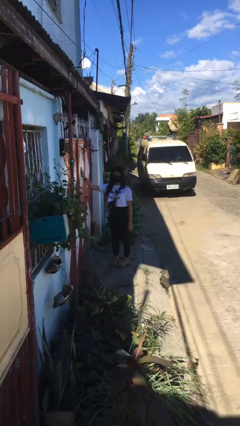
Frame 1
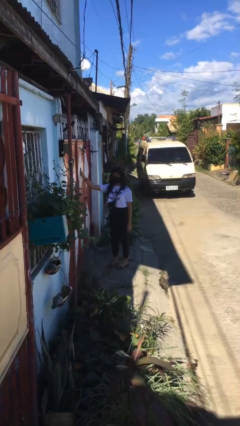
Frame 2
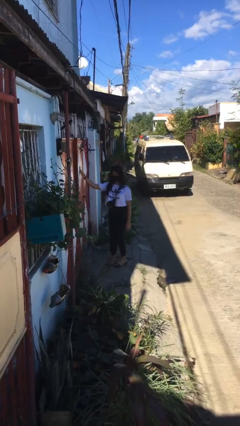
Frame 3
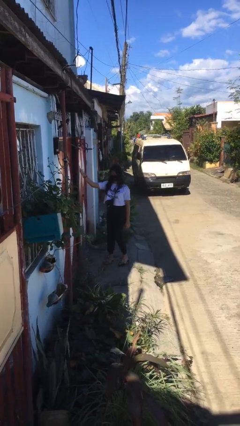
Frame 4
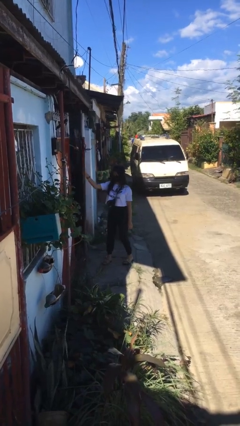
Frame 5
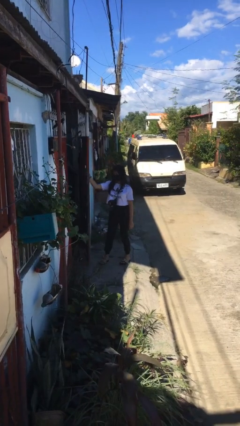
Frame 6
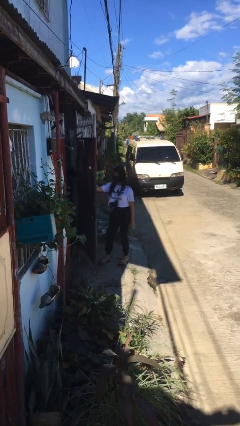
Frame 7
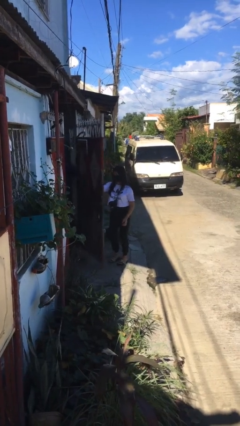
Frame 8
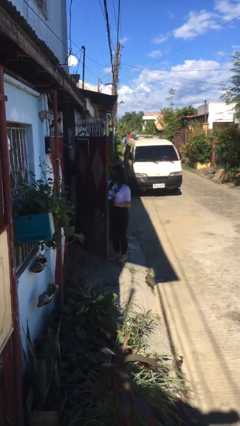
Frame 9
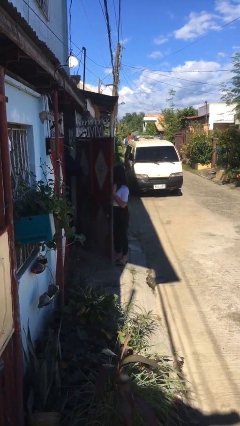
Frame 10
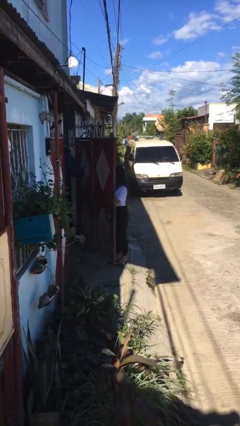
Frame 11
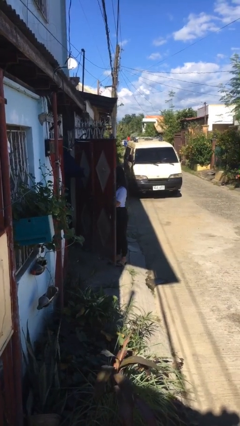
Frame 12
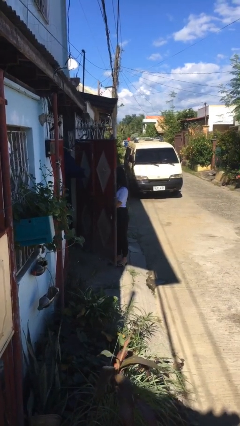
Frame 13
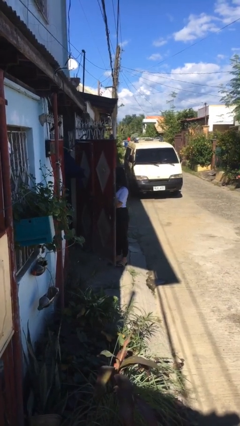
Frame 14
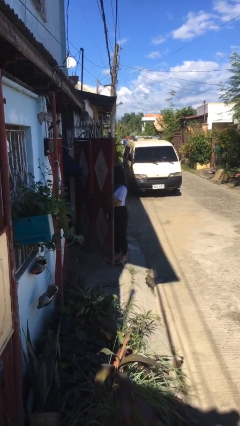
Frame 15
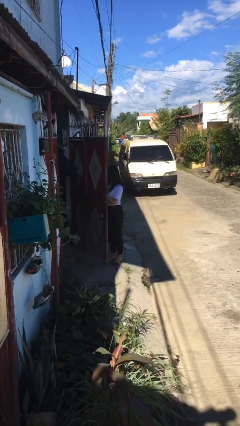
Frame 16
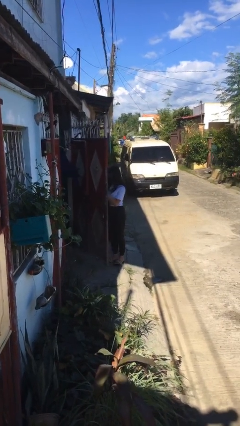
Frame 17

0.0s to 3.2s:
person opens gate

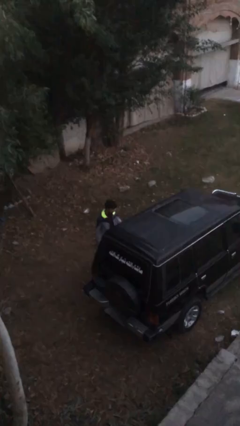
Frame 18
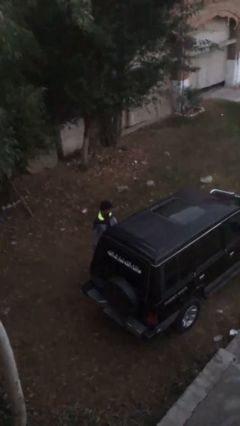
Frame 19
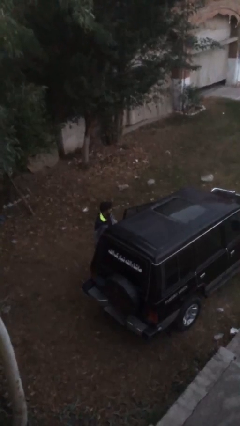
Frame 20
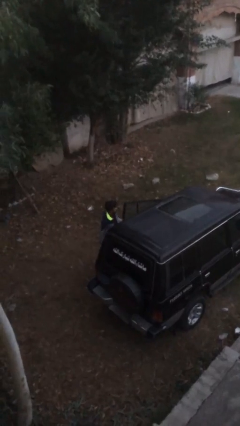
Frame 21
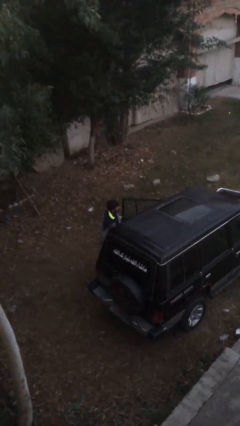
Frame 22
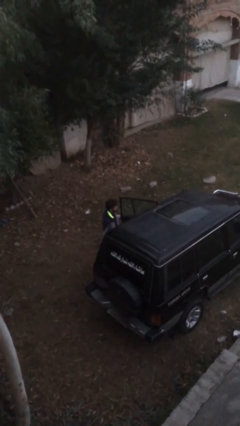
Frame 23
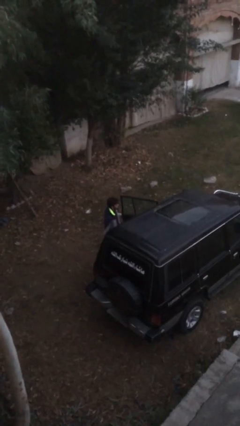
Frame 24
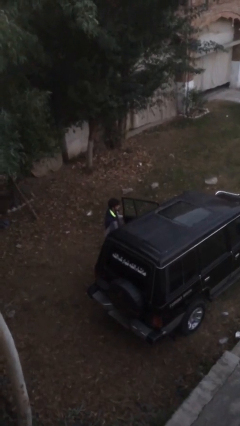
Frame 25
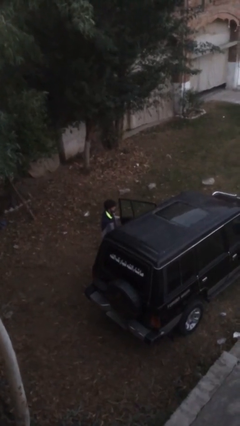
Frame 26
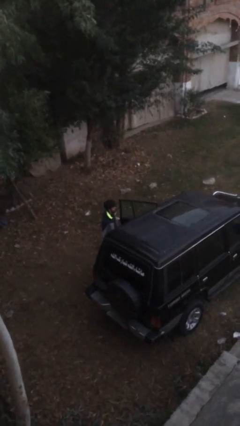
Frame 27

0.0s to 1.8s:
person opens car door

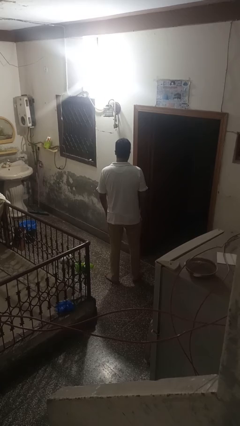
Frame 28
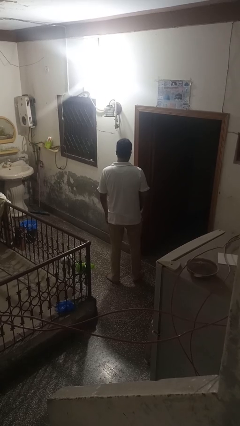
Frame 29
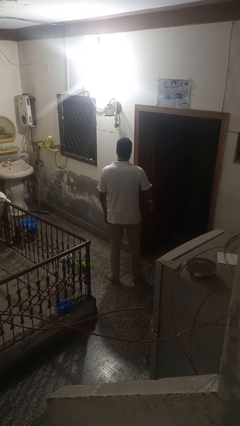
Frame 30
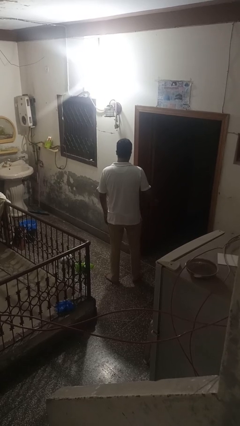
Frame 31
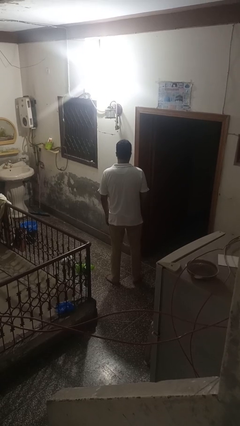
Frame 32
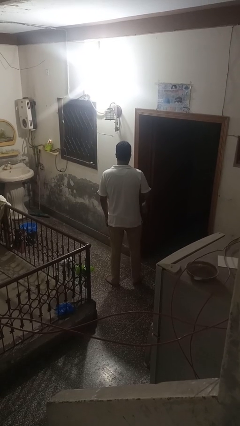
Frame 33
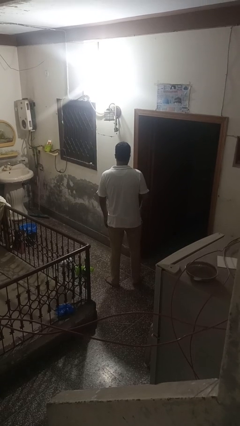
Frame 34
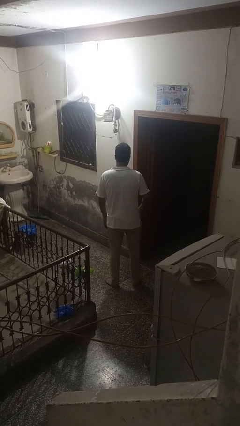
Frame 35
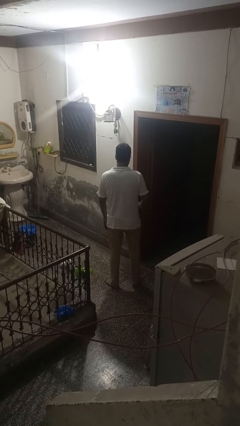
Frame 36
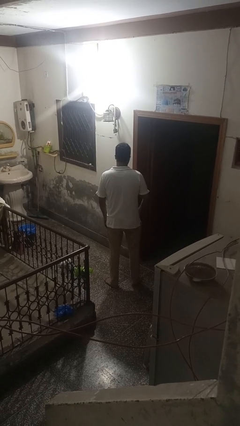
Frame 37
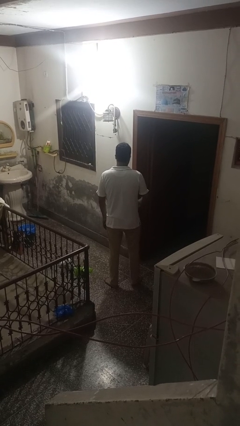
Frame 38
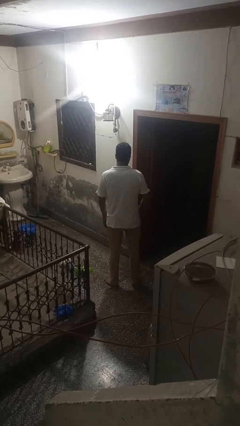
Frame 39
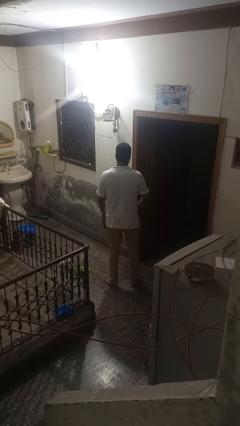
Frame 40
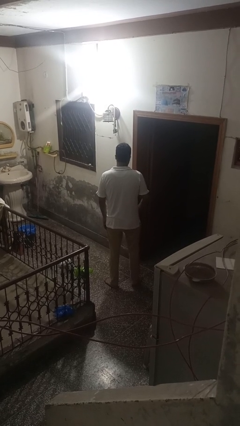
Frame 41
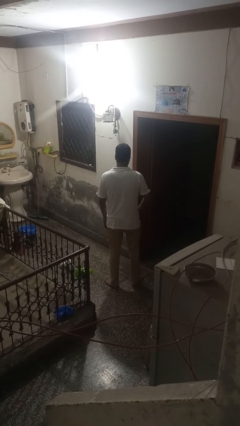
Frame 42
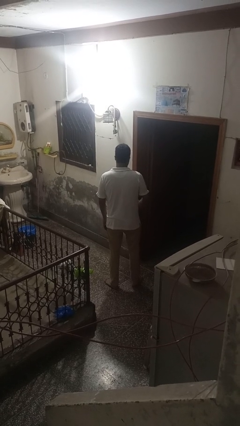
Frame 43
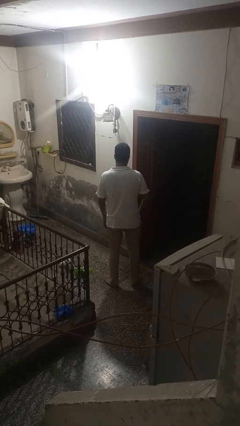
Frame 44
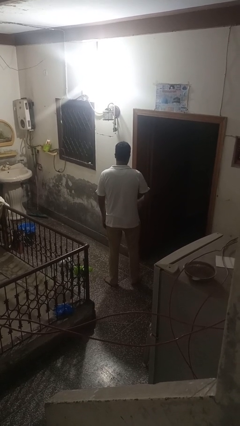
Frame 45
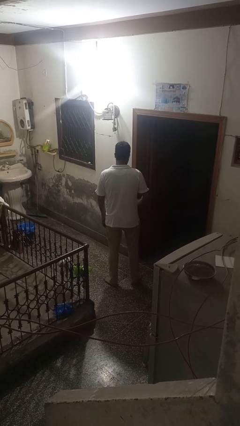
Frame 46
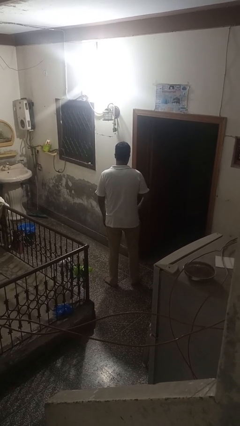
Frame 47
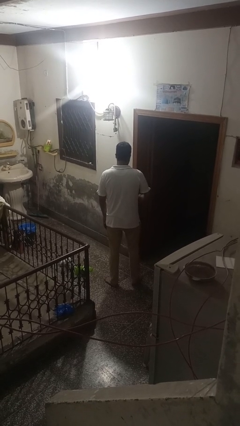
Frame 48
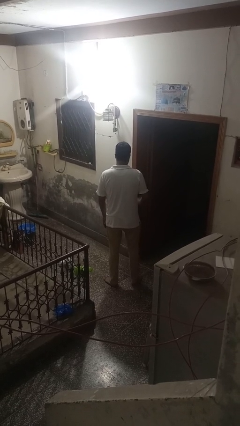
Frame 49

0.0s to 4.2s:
person slaps hands on thighs

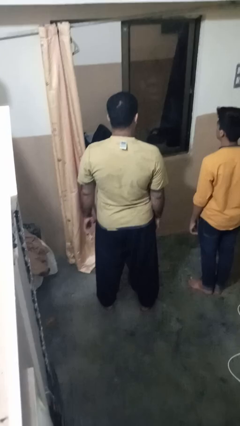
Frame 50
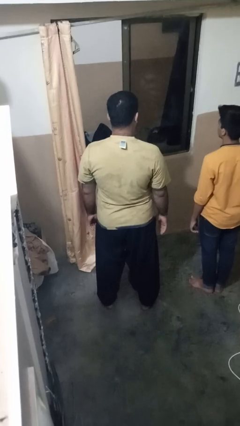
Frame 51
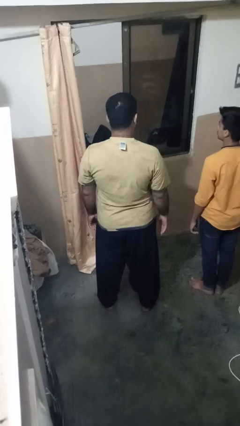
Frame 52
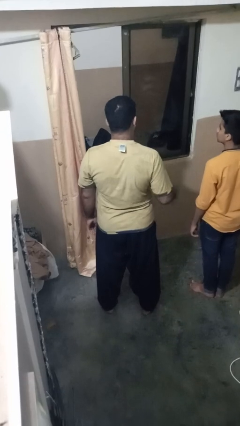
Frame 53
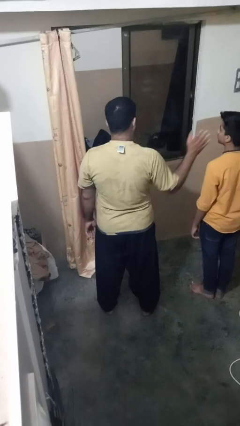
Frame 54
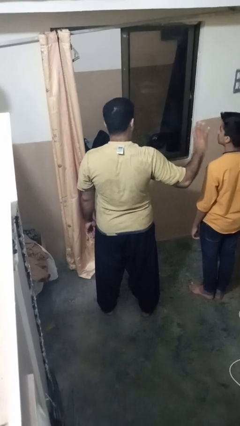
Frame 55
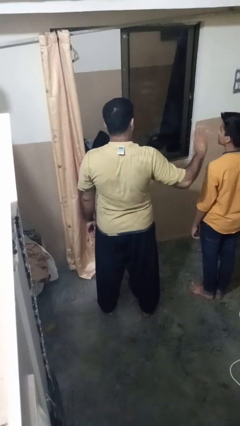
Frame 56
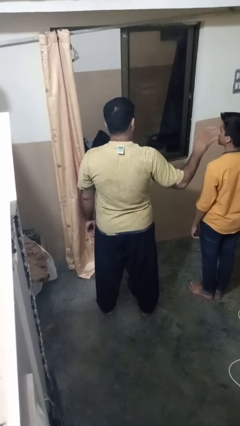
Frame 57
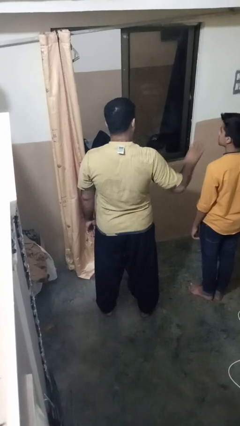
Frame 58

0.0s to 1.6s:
person waves at person

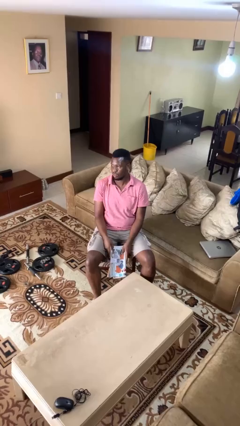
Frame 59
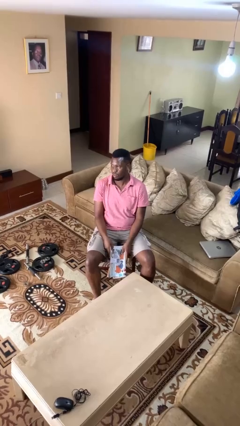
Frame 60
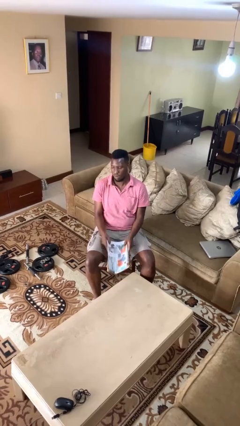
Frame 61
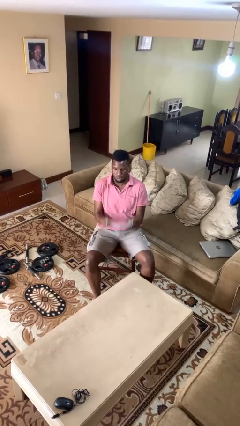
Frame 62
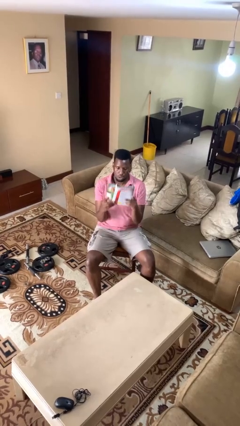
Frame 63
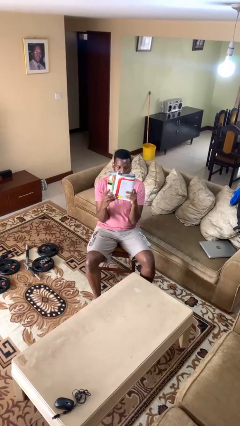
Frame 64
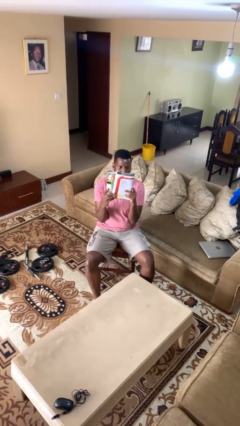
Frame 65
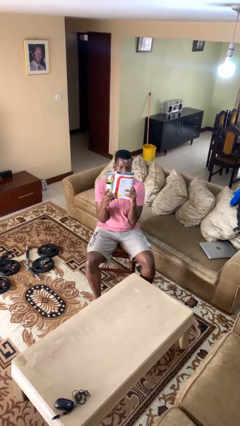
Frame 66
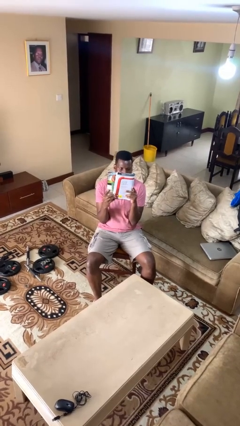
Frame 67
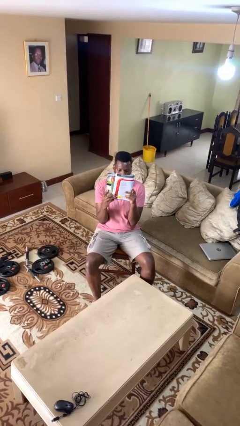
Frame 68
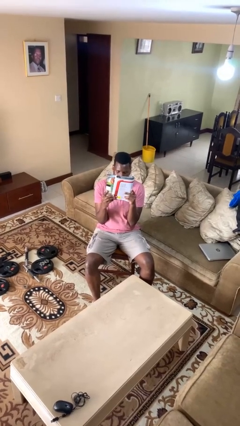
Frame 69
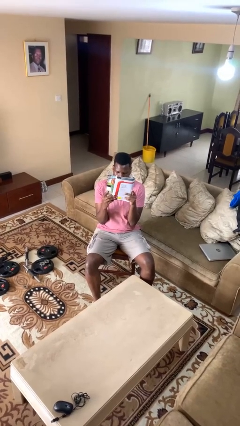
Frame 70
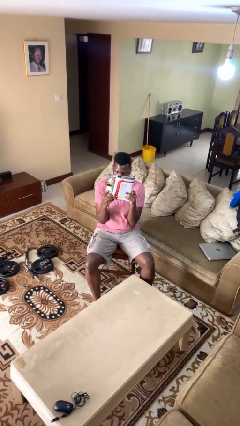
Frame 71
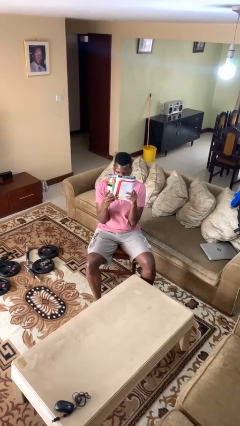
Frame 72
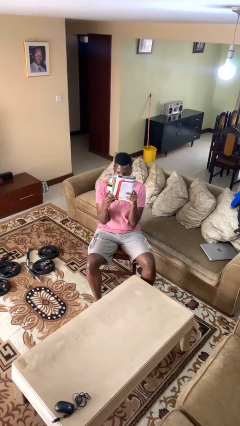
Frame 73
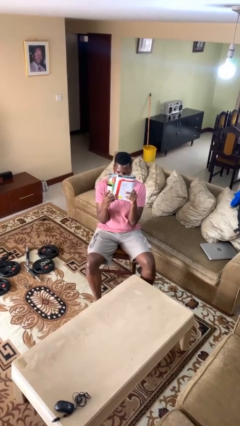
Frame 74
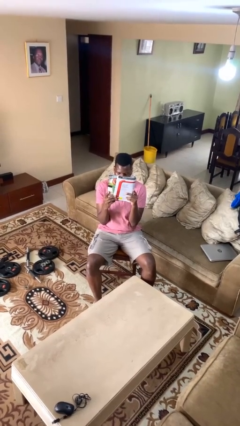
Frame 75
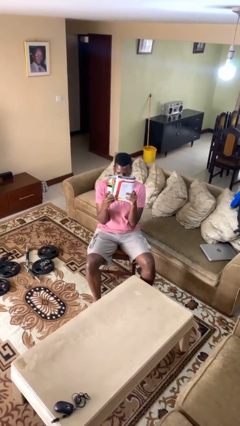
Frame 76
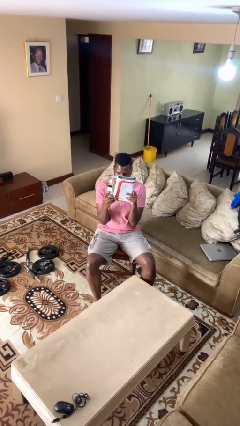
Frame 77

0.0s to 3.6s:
person reads document

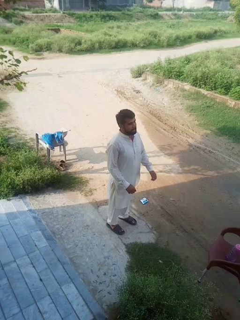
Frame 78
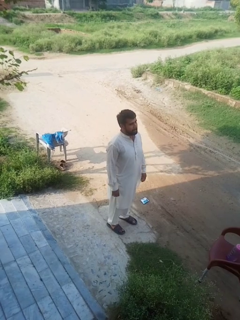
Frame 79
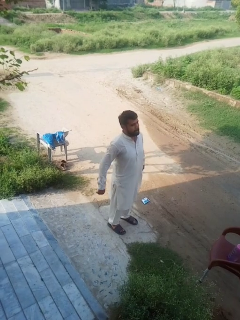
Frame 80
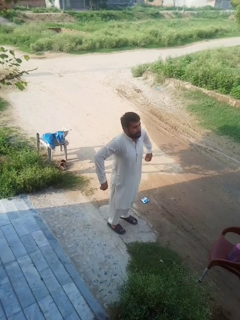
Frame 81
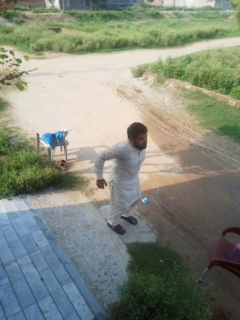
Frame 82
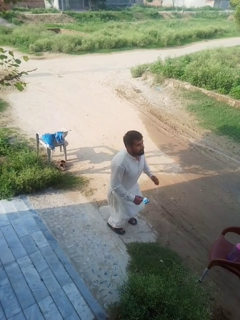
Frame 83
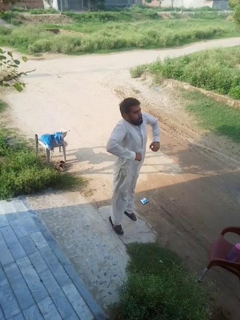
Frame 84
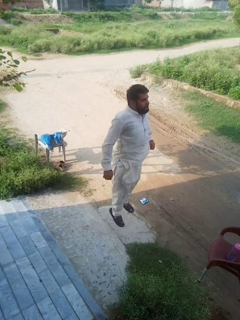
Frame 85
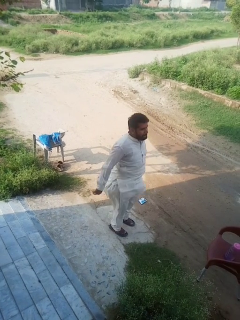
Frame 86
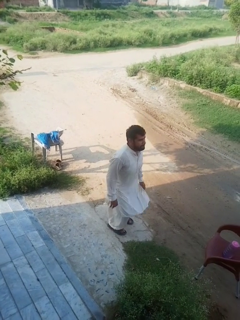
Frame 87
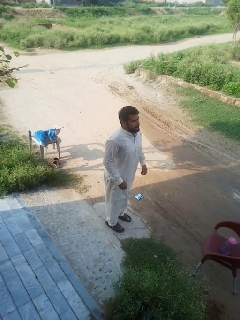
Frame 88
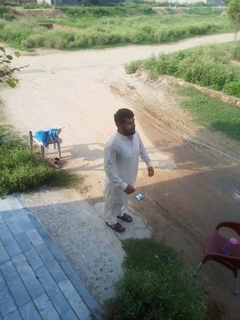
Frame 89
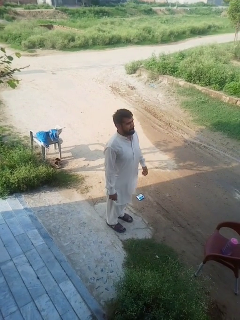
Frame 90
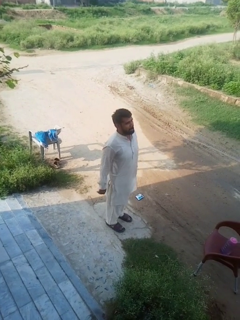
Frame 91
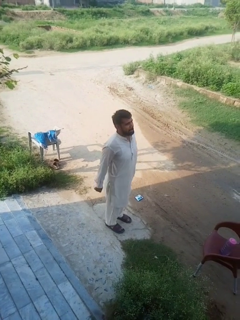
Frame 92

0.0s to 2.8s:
person jumps

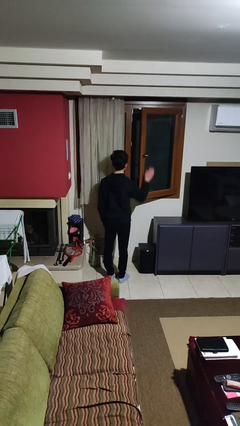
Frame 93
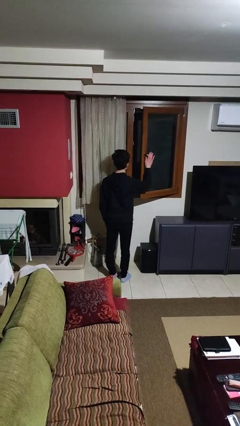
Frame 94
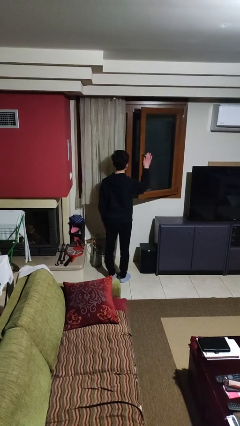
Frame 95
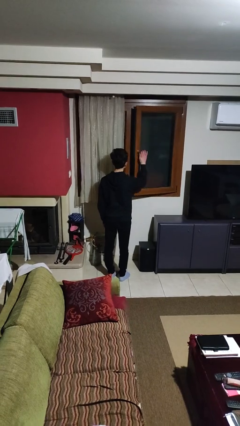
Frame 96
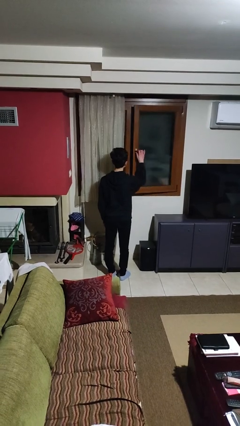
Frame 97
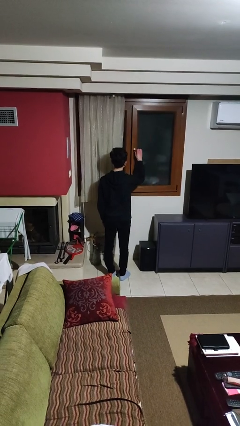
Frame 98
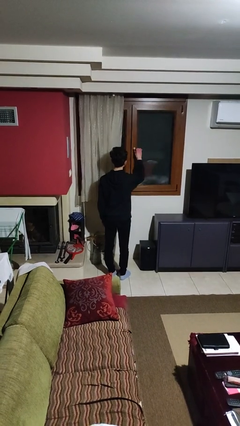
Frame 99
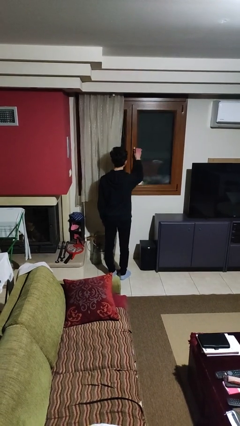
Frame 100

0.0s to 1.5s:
person closes home window
